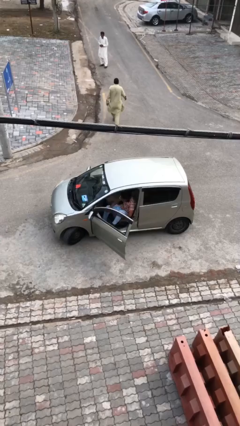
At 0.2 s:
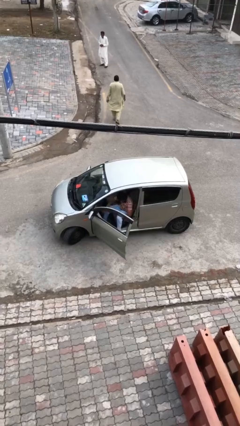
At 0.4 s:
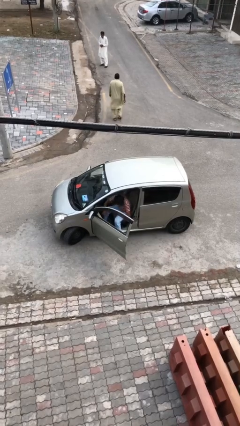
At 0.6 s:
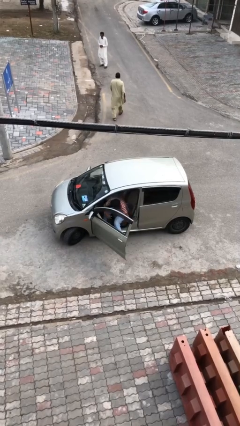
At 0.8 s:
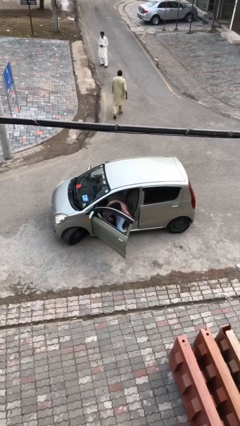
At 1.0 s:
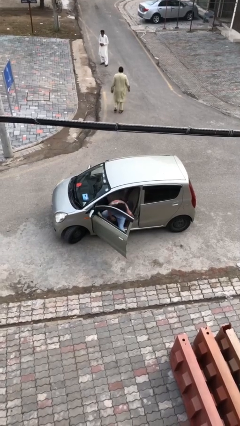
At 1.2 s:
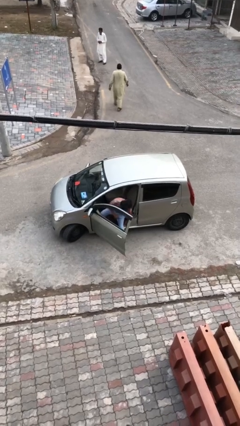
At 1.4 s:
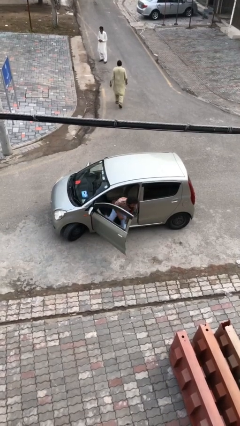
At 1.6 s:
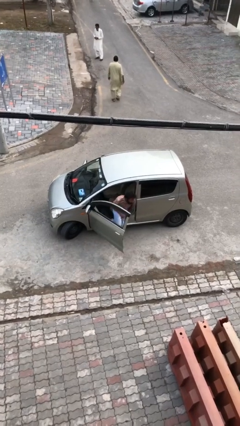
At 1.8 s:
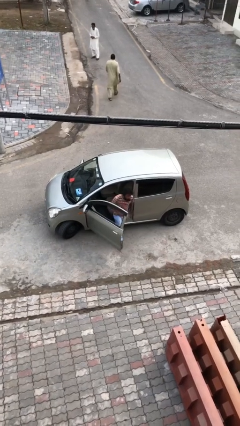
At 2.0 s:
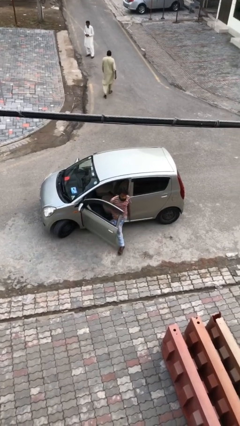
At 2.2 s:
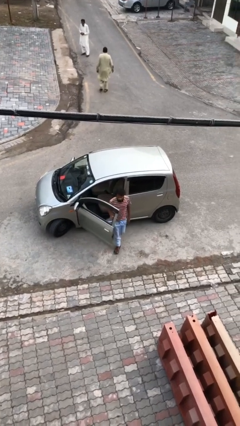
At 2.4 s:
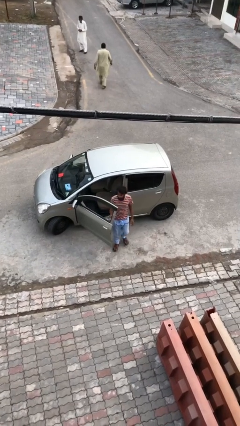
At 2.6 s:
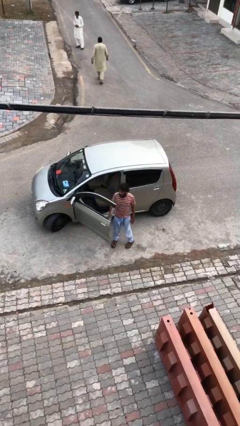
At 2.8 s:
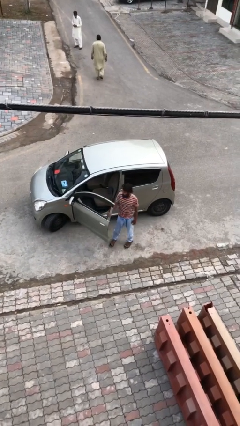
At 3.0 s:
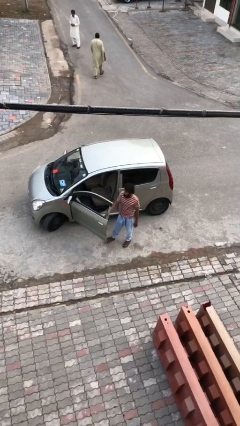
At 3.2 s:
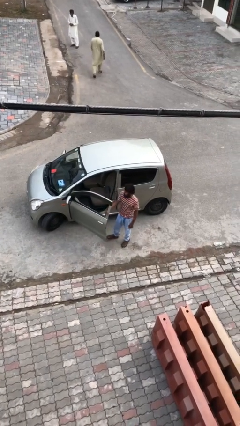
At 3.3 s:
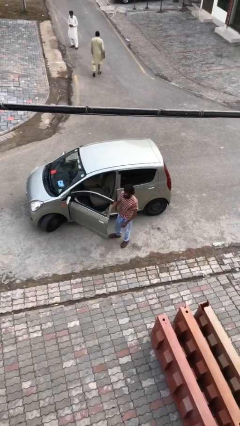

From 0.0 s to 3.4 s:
person exits car

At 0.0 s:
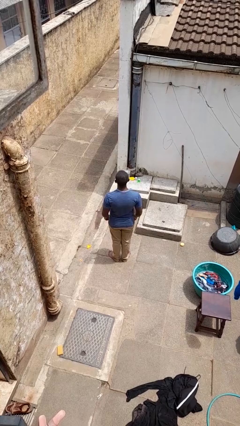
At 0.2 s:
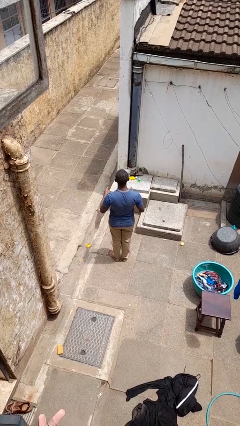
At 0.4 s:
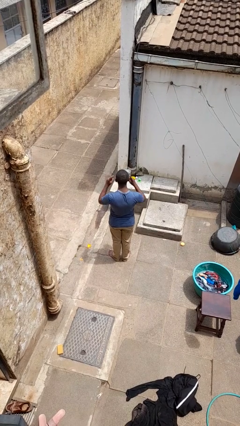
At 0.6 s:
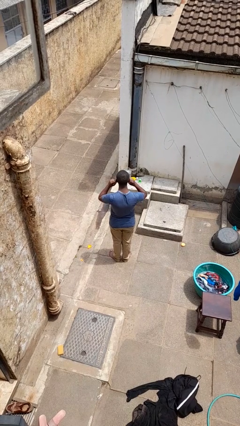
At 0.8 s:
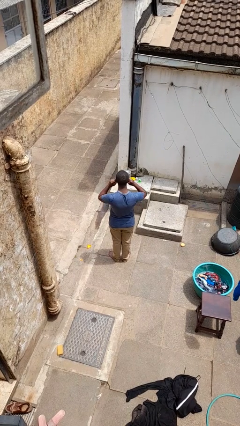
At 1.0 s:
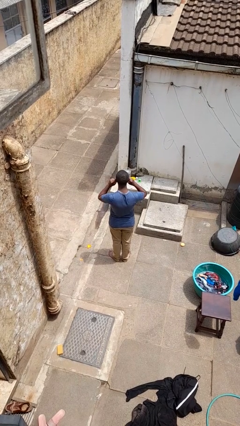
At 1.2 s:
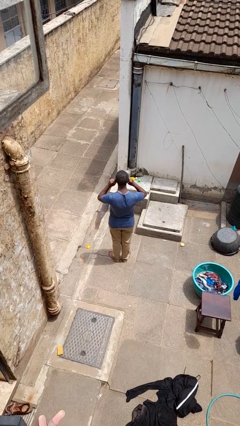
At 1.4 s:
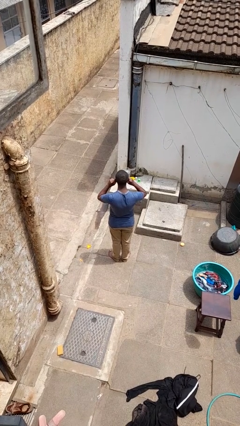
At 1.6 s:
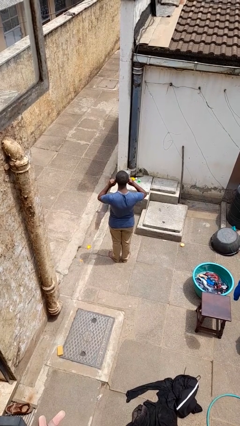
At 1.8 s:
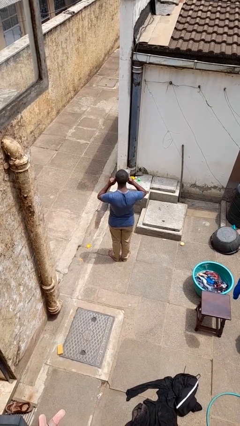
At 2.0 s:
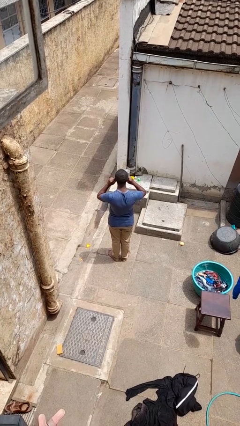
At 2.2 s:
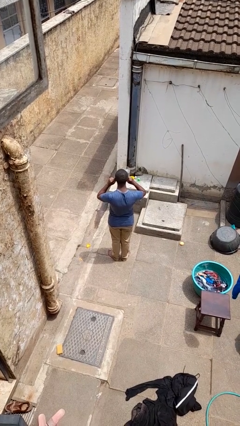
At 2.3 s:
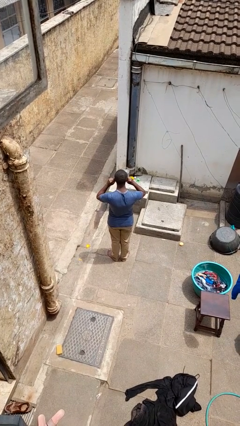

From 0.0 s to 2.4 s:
person puts fingers in ear

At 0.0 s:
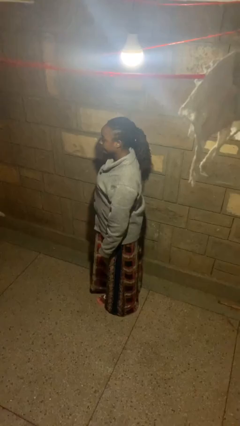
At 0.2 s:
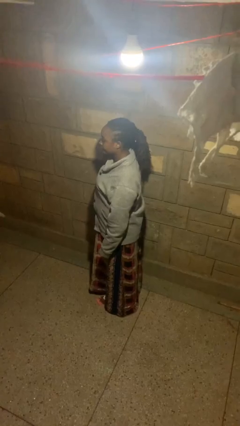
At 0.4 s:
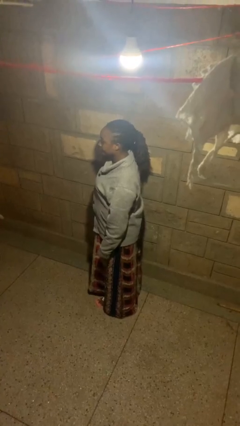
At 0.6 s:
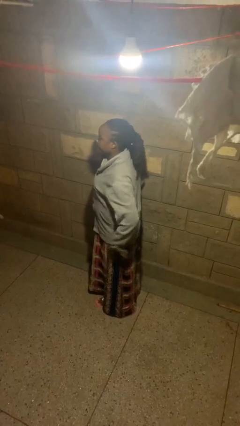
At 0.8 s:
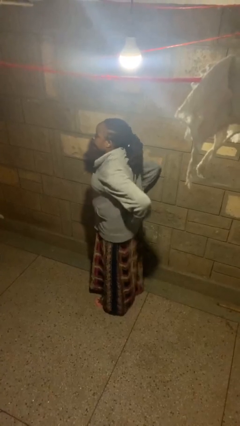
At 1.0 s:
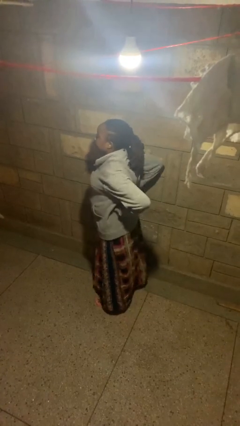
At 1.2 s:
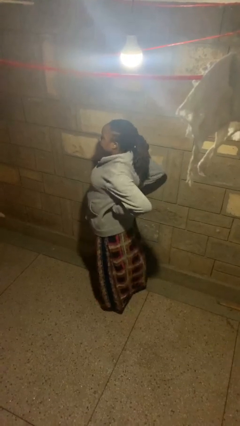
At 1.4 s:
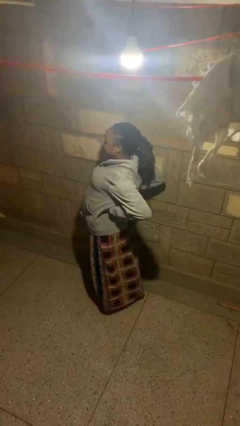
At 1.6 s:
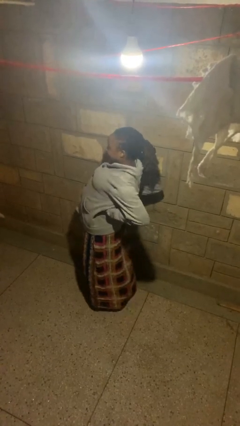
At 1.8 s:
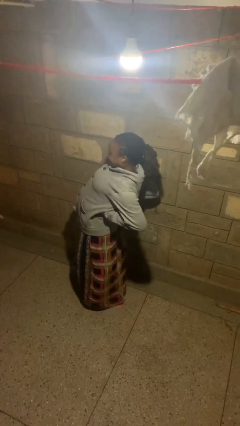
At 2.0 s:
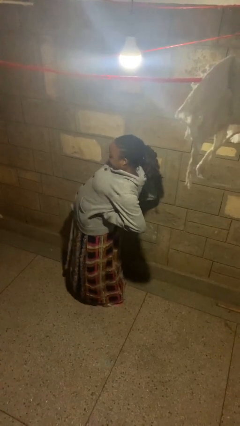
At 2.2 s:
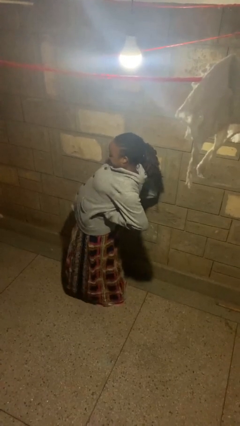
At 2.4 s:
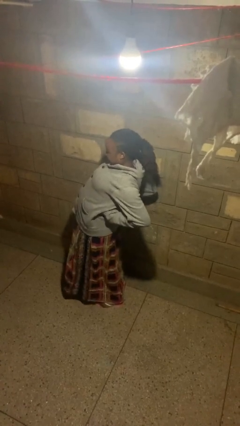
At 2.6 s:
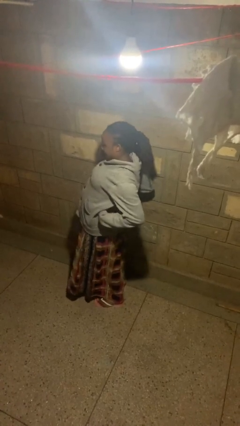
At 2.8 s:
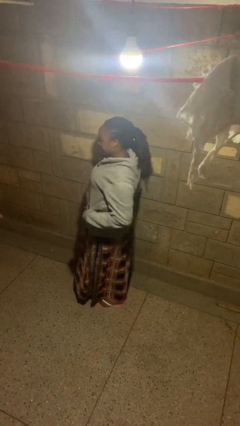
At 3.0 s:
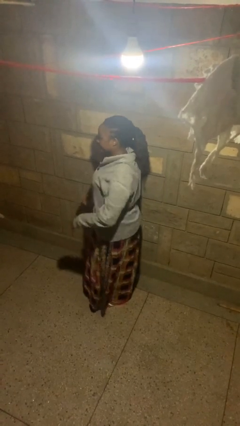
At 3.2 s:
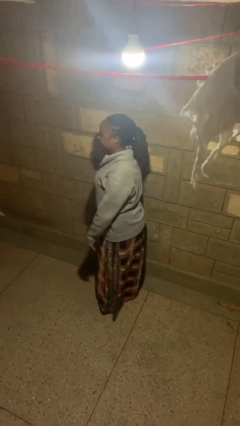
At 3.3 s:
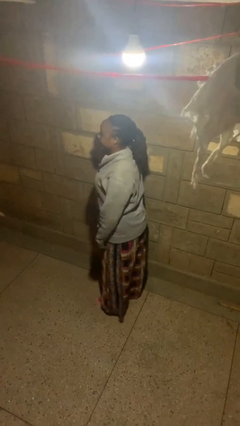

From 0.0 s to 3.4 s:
person stretches back

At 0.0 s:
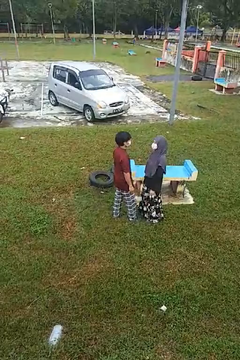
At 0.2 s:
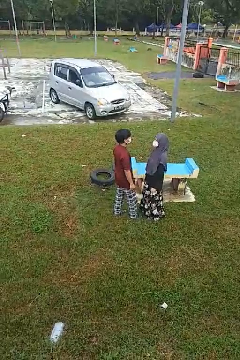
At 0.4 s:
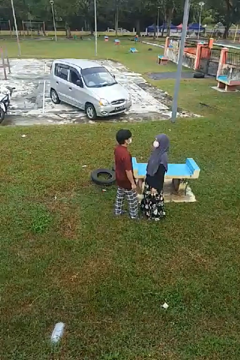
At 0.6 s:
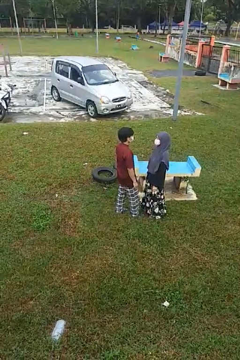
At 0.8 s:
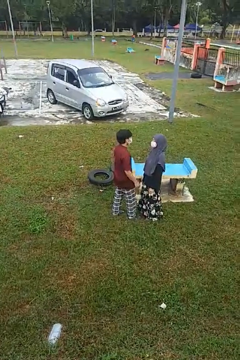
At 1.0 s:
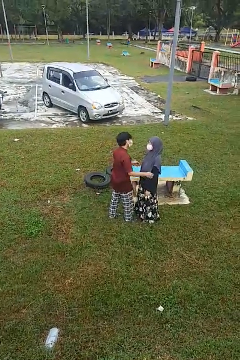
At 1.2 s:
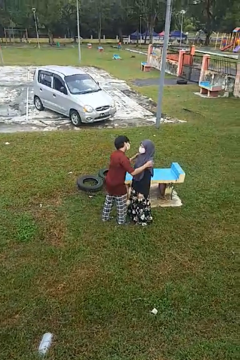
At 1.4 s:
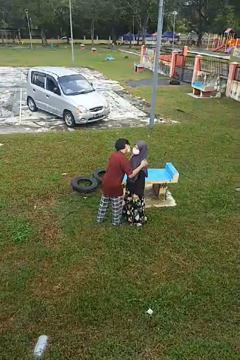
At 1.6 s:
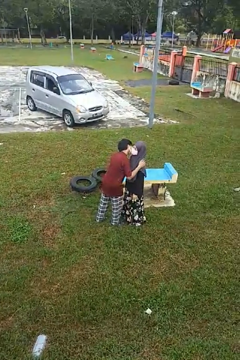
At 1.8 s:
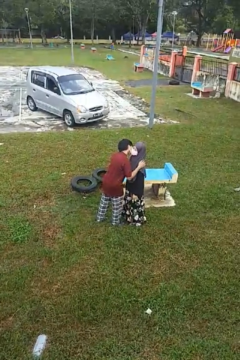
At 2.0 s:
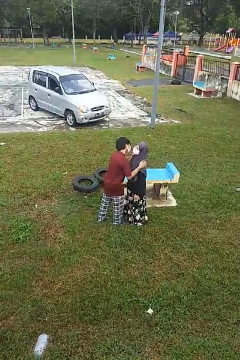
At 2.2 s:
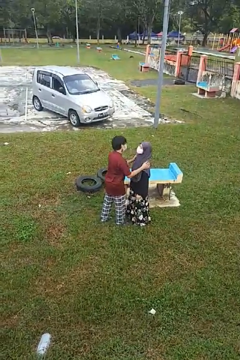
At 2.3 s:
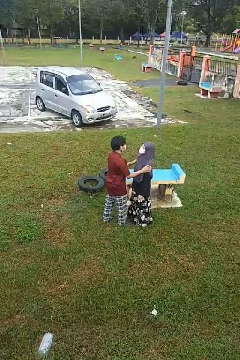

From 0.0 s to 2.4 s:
person kisses cheek of person

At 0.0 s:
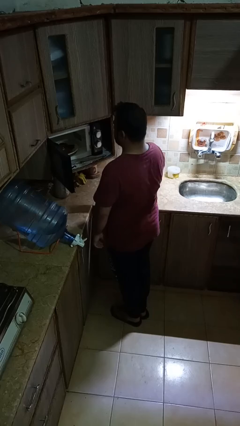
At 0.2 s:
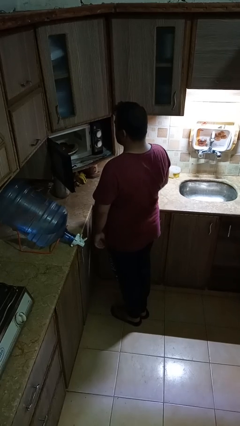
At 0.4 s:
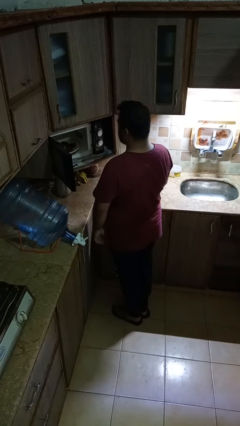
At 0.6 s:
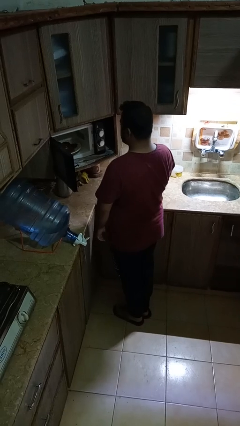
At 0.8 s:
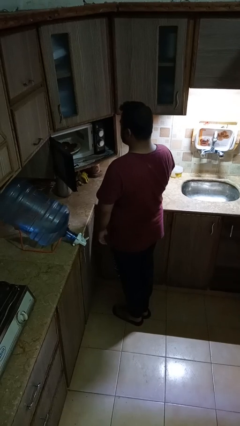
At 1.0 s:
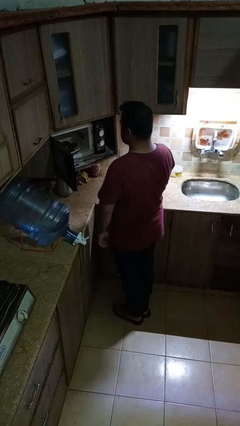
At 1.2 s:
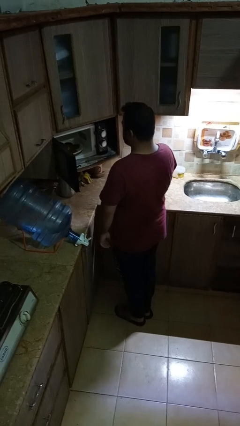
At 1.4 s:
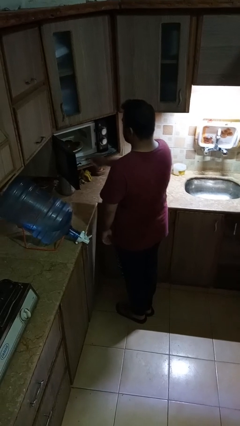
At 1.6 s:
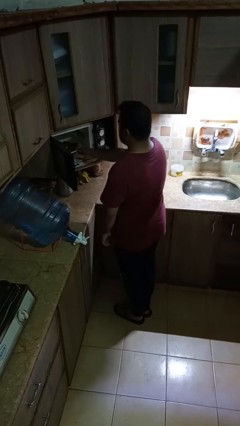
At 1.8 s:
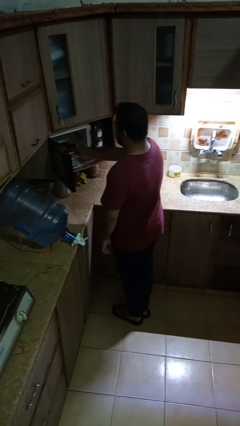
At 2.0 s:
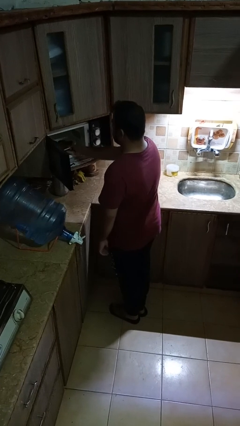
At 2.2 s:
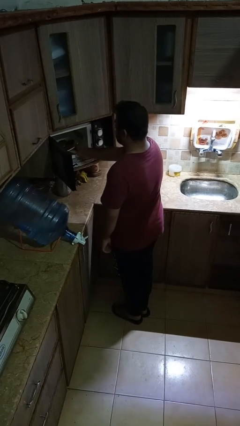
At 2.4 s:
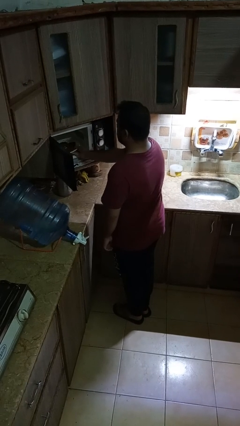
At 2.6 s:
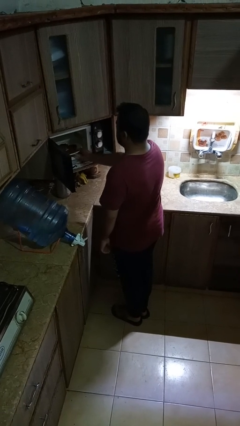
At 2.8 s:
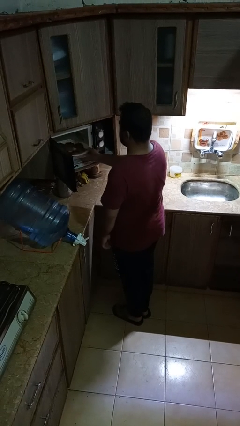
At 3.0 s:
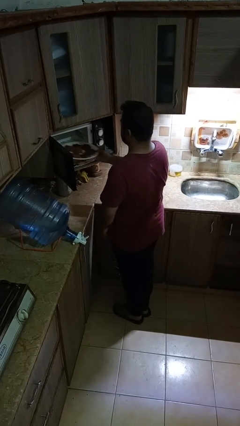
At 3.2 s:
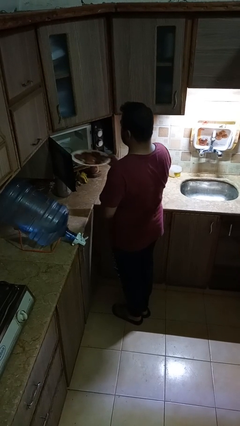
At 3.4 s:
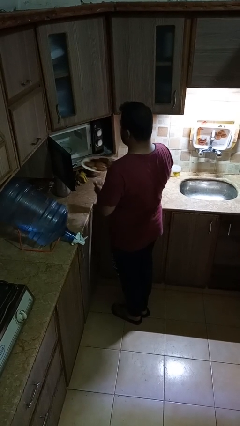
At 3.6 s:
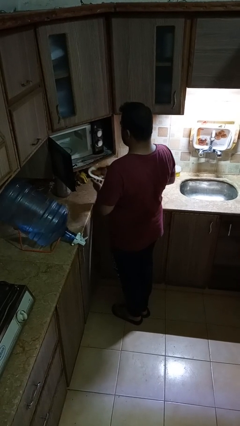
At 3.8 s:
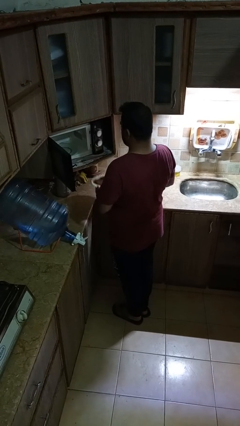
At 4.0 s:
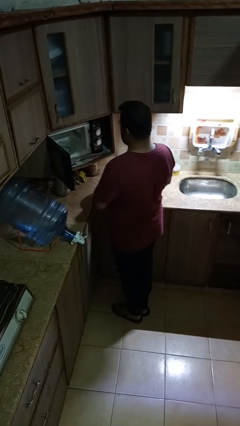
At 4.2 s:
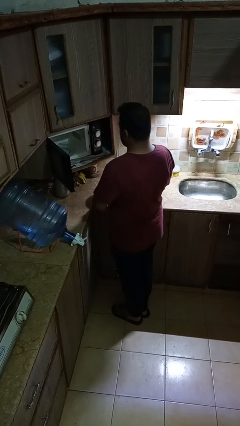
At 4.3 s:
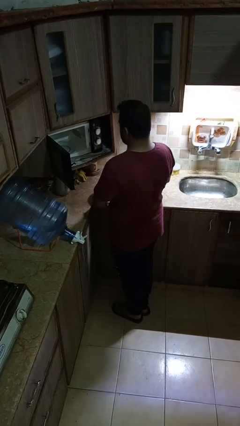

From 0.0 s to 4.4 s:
person takes object from microwave

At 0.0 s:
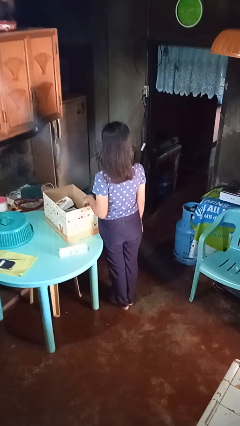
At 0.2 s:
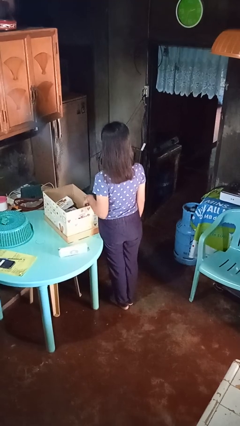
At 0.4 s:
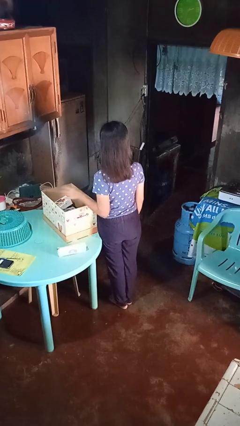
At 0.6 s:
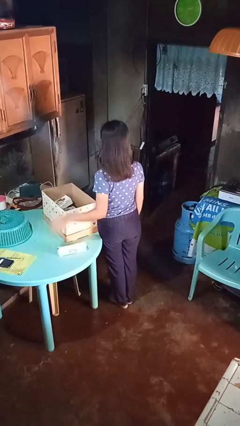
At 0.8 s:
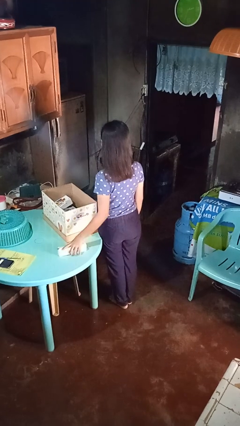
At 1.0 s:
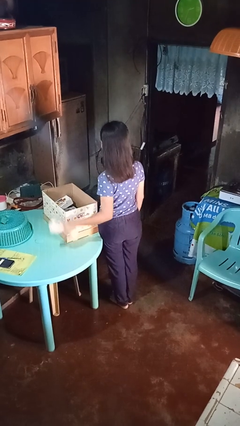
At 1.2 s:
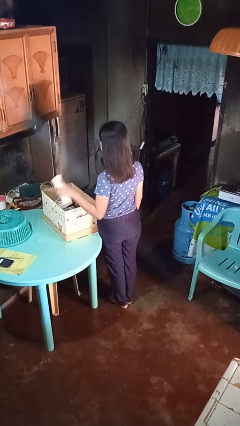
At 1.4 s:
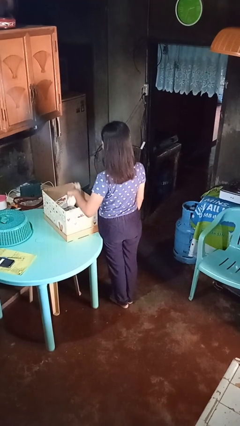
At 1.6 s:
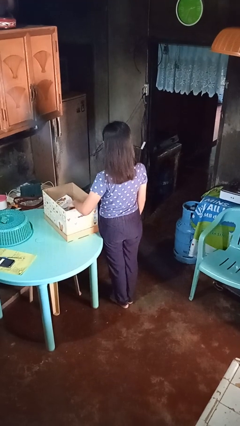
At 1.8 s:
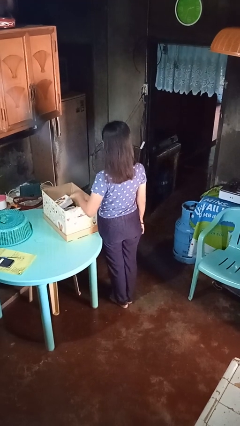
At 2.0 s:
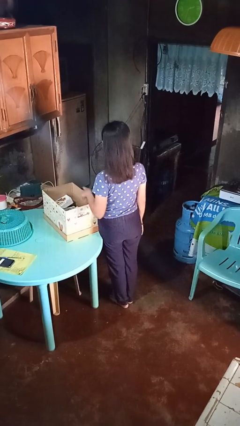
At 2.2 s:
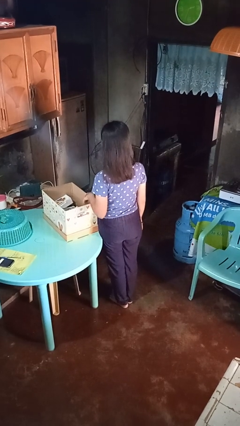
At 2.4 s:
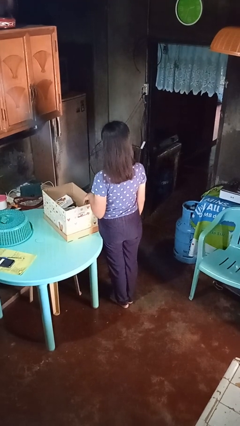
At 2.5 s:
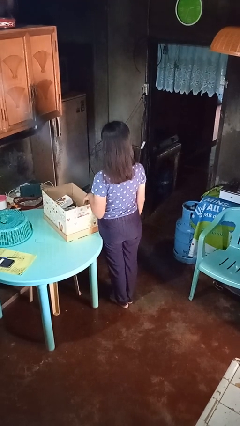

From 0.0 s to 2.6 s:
person puts object into box
